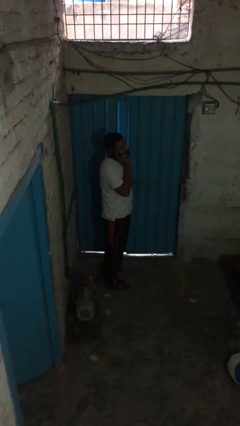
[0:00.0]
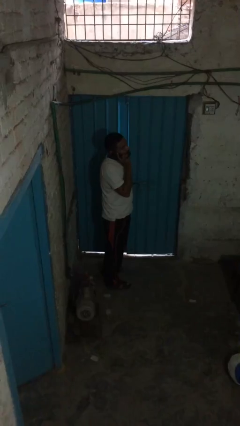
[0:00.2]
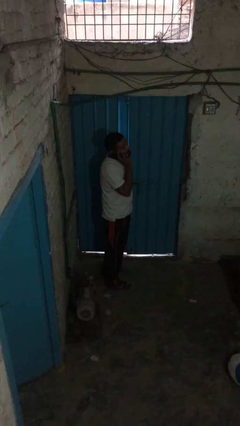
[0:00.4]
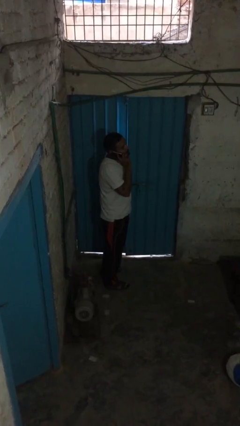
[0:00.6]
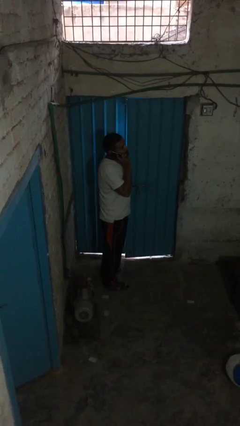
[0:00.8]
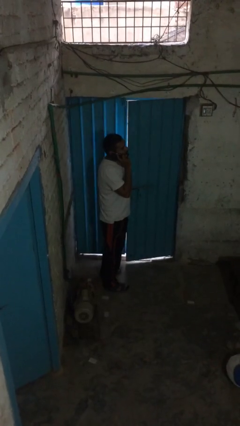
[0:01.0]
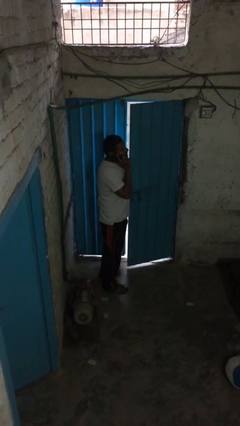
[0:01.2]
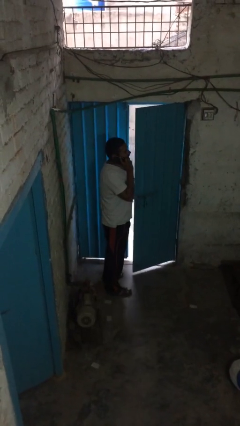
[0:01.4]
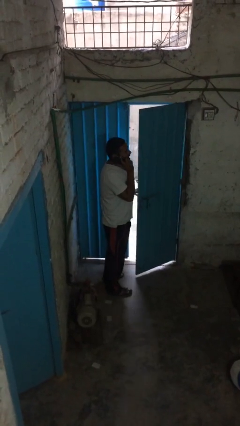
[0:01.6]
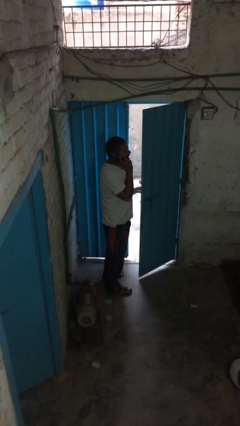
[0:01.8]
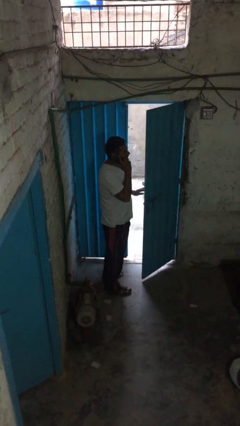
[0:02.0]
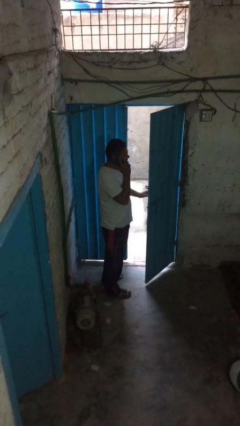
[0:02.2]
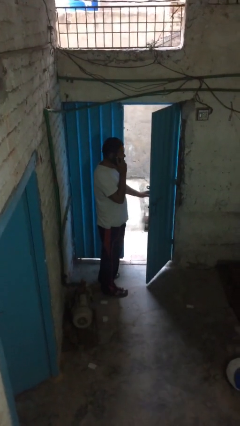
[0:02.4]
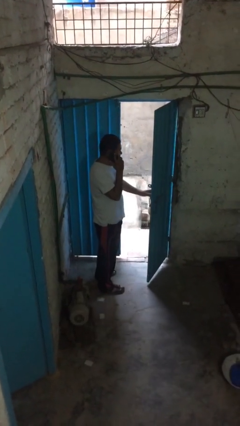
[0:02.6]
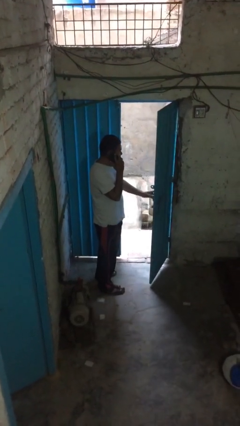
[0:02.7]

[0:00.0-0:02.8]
person opens facility door

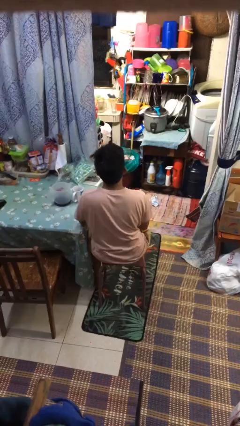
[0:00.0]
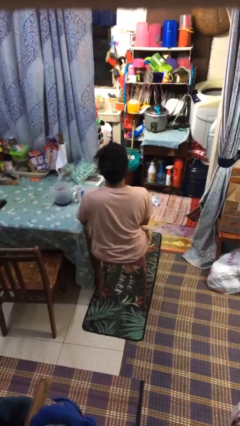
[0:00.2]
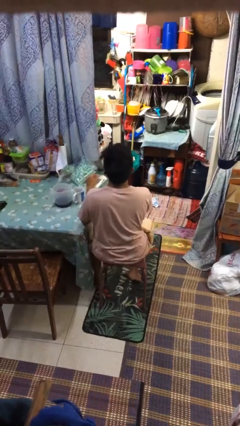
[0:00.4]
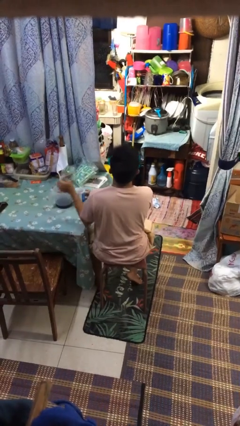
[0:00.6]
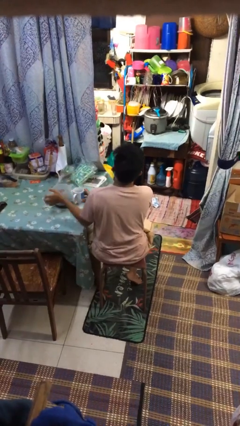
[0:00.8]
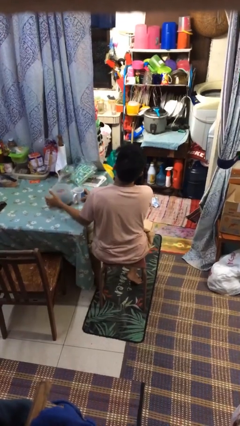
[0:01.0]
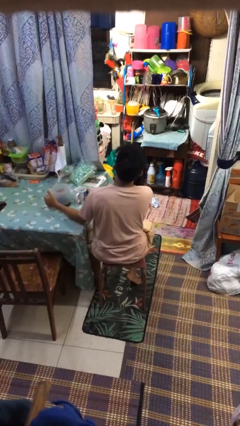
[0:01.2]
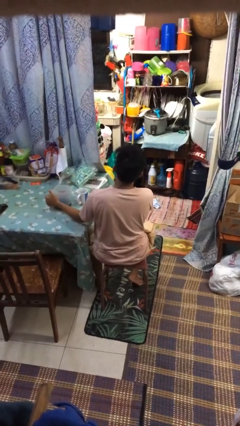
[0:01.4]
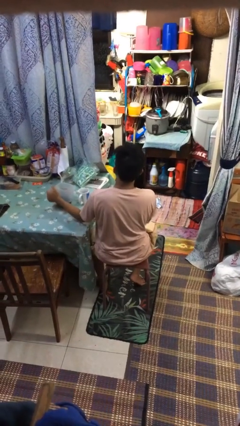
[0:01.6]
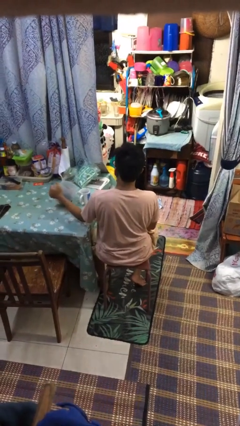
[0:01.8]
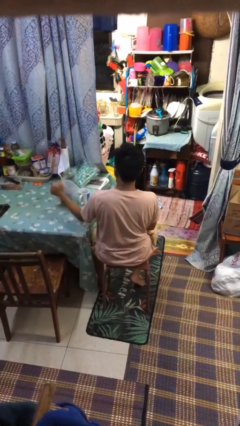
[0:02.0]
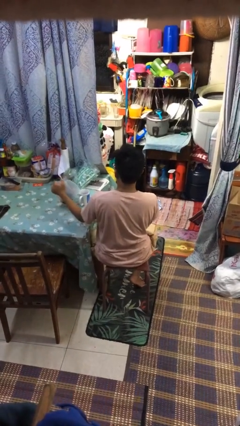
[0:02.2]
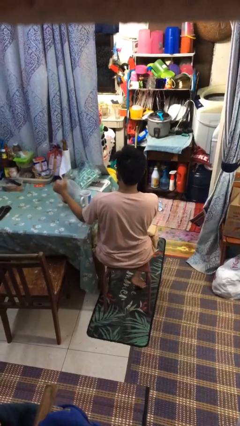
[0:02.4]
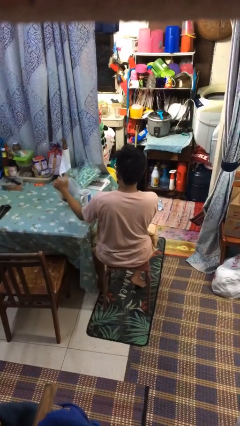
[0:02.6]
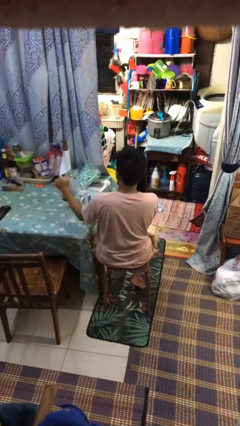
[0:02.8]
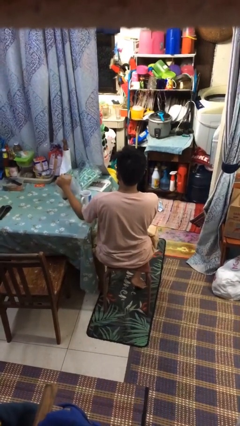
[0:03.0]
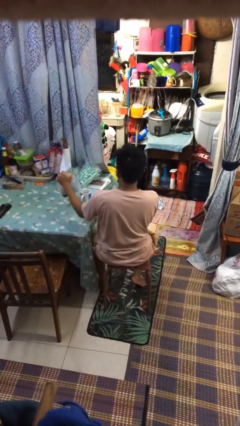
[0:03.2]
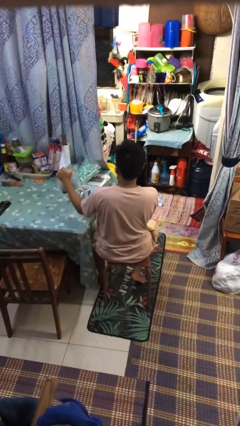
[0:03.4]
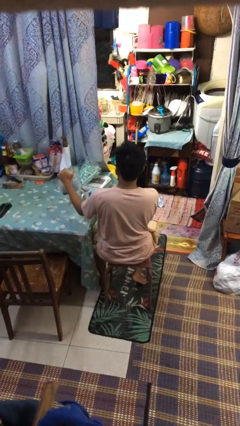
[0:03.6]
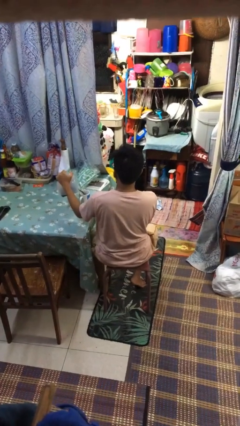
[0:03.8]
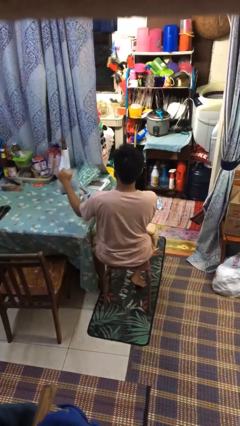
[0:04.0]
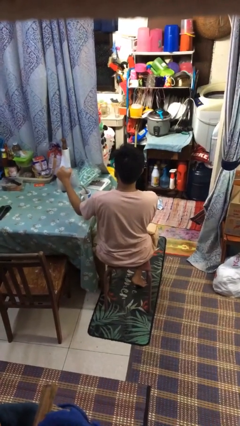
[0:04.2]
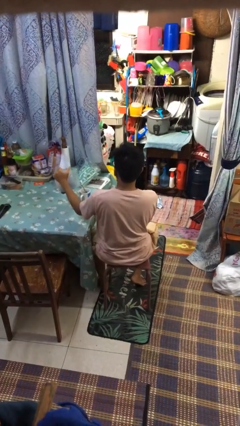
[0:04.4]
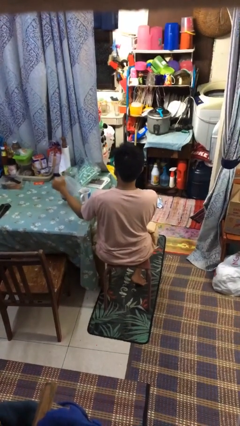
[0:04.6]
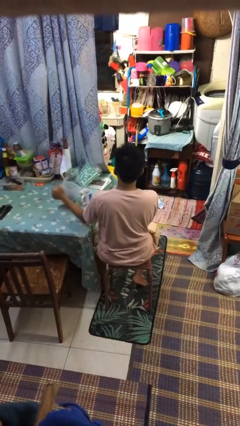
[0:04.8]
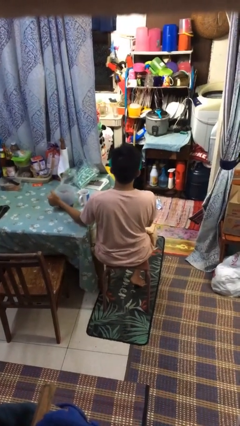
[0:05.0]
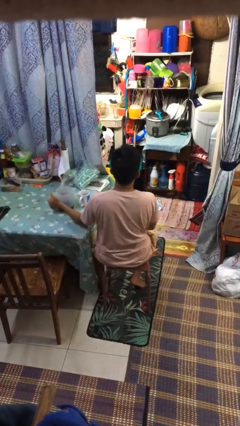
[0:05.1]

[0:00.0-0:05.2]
person pours coffee into mug

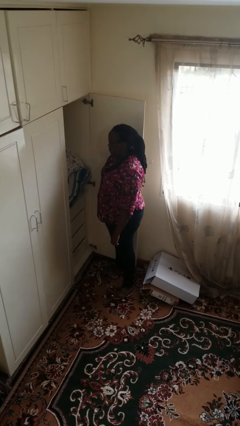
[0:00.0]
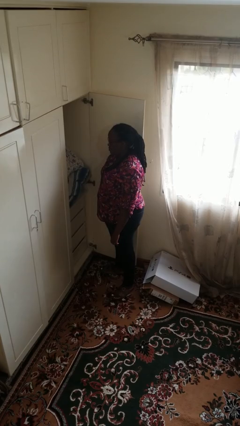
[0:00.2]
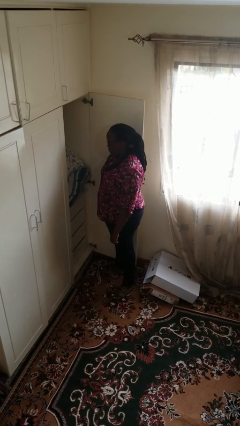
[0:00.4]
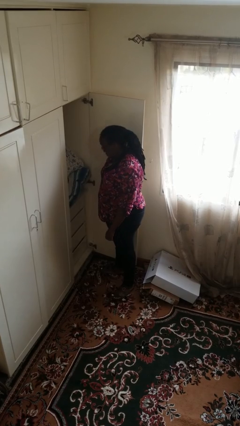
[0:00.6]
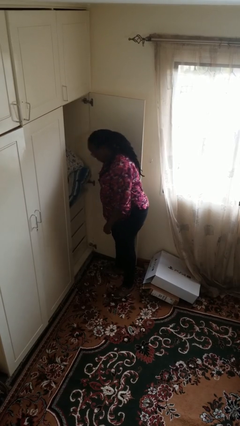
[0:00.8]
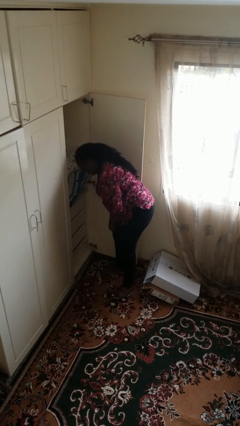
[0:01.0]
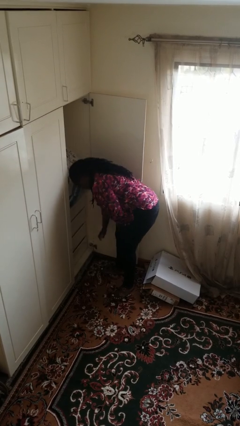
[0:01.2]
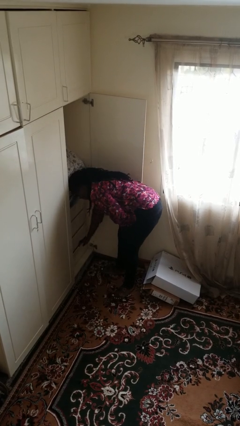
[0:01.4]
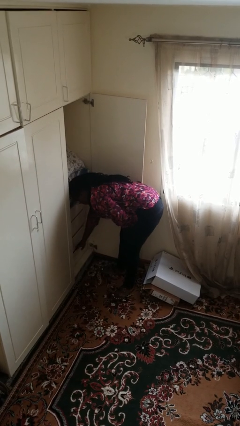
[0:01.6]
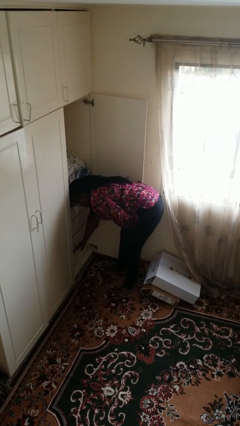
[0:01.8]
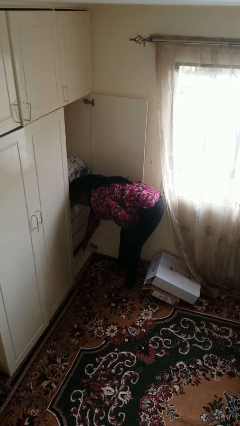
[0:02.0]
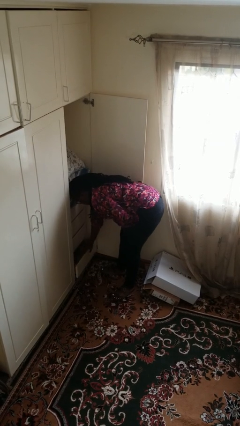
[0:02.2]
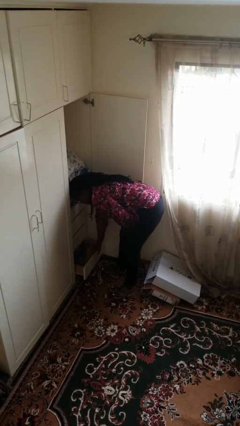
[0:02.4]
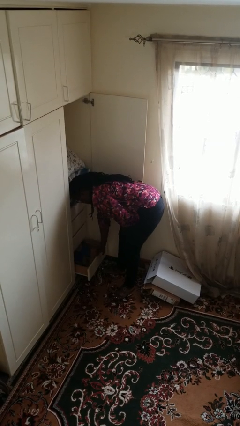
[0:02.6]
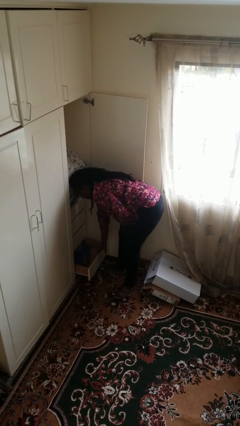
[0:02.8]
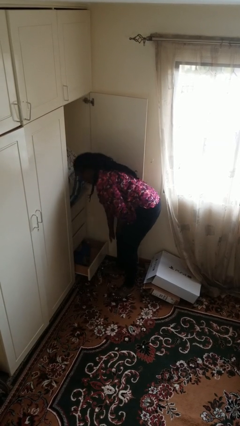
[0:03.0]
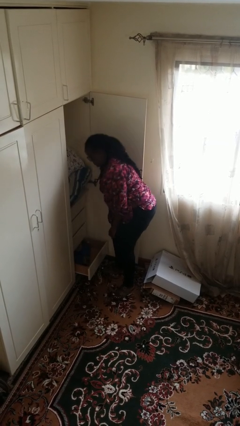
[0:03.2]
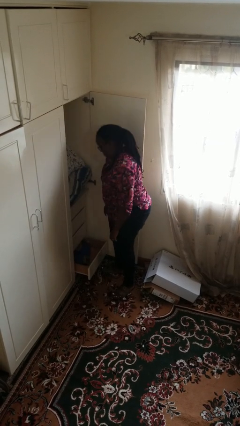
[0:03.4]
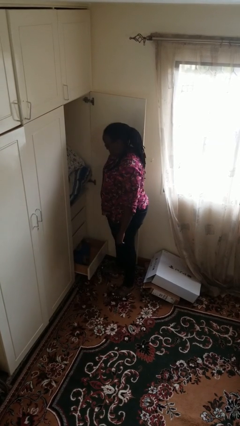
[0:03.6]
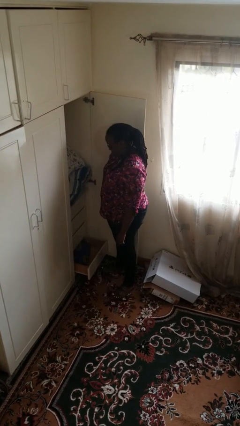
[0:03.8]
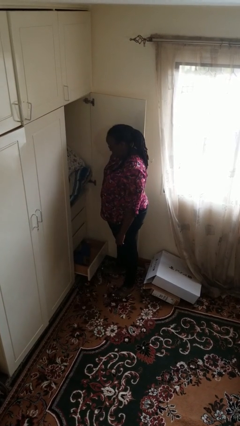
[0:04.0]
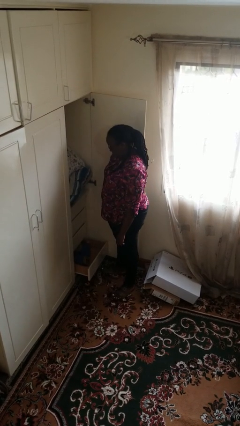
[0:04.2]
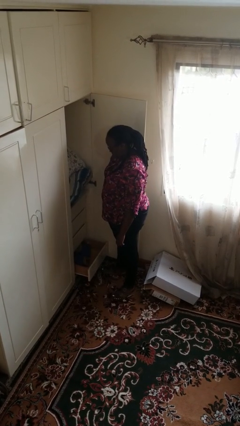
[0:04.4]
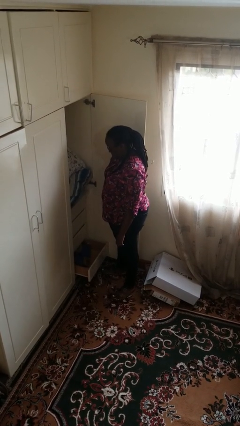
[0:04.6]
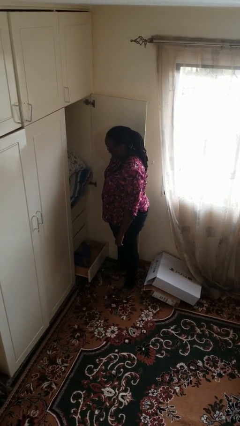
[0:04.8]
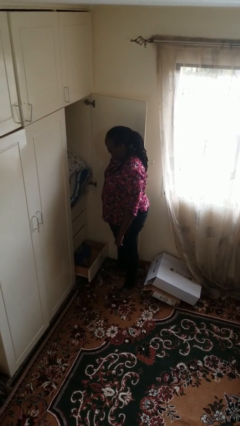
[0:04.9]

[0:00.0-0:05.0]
person opens dresser drawer

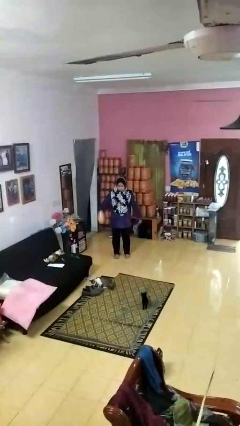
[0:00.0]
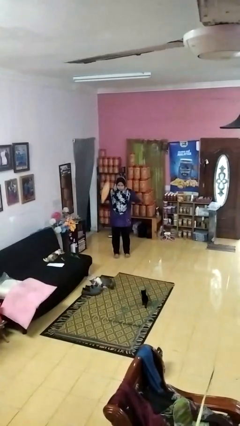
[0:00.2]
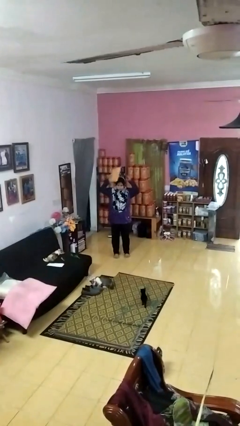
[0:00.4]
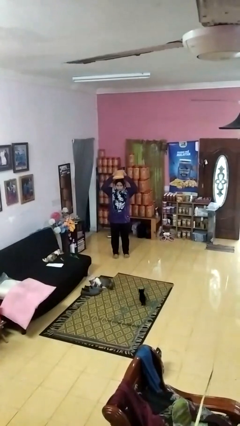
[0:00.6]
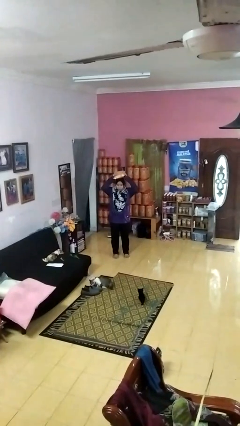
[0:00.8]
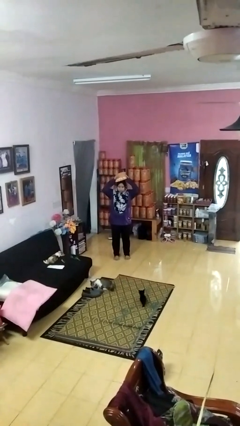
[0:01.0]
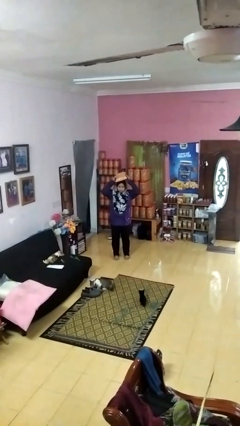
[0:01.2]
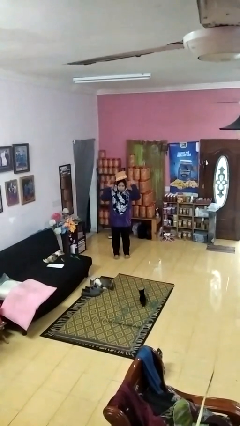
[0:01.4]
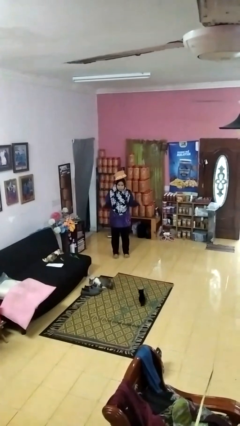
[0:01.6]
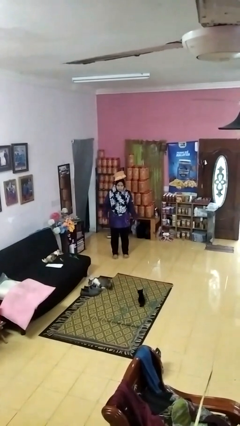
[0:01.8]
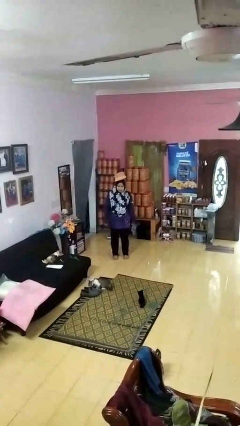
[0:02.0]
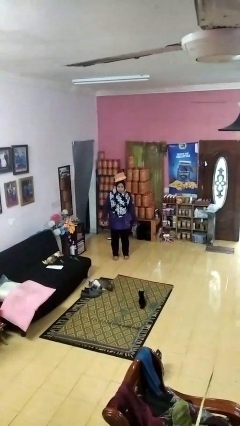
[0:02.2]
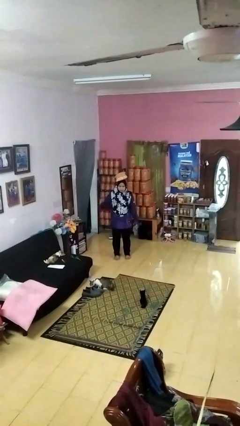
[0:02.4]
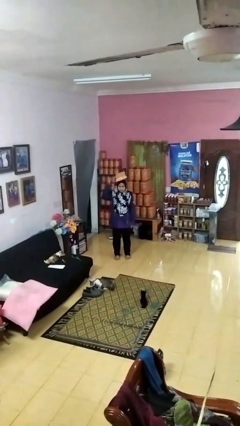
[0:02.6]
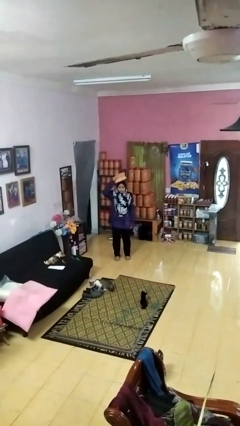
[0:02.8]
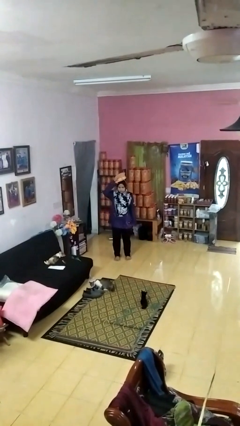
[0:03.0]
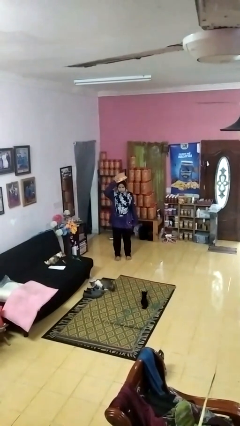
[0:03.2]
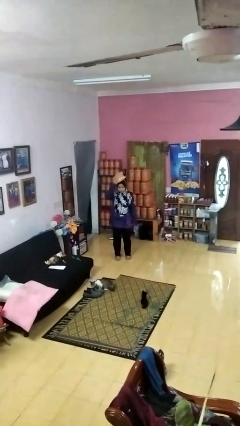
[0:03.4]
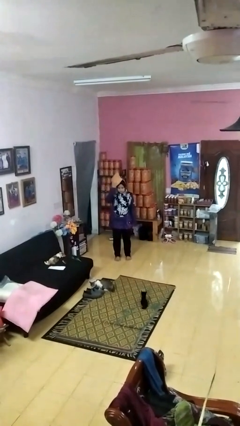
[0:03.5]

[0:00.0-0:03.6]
person holds object above head

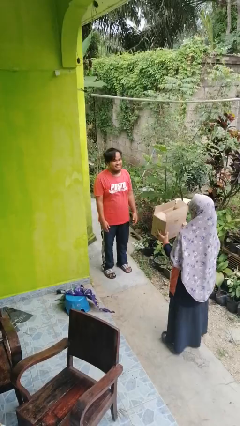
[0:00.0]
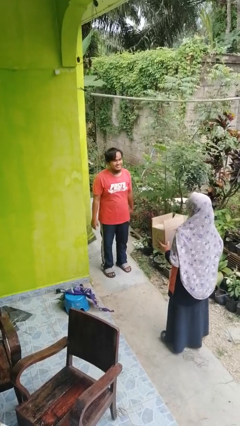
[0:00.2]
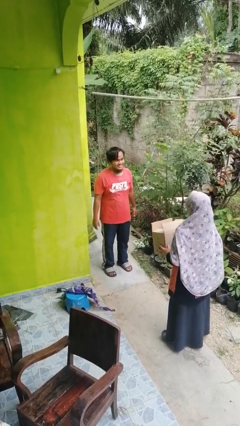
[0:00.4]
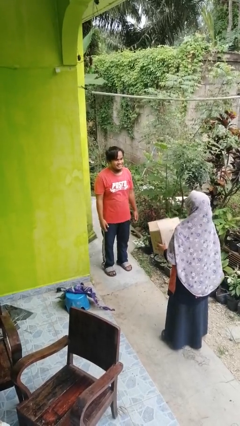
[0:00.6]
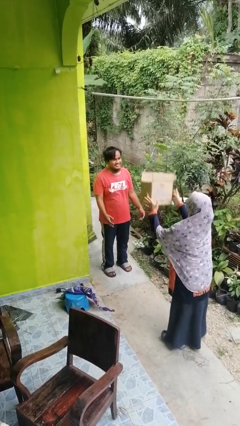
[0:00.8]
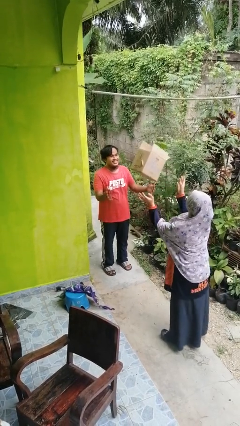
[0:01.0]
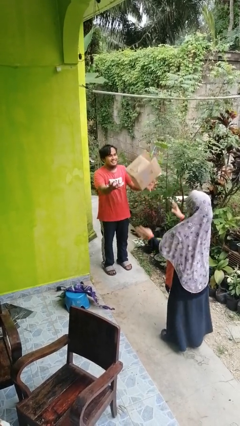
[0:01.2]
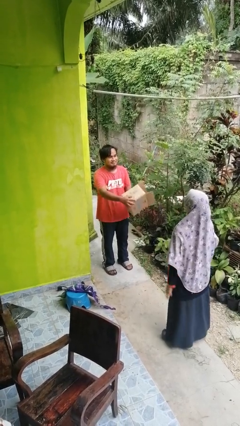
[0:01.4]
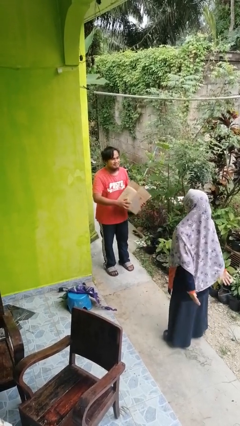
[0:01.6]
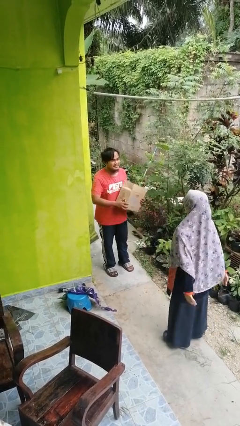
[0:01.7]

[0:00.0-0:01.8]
person catches object from person
